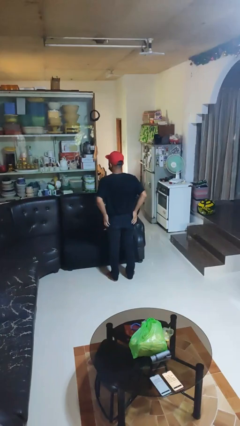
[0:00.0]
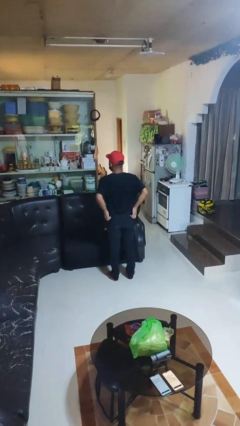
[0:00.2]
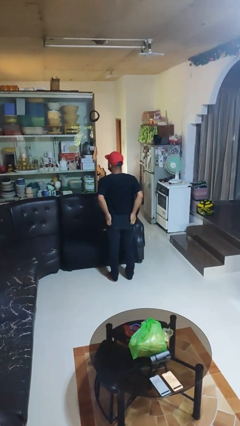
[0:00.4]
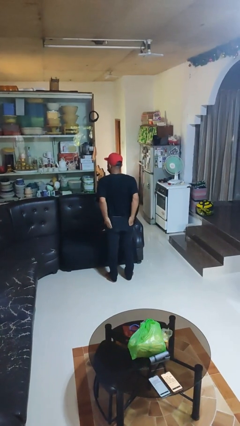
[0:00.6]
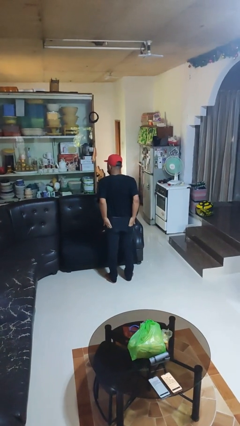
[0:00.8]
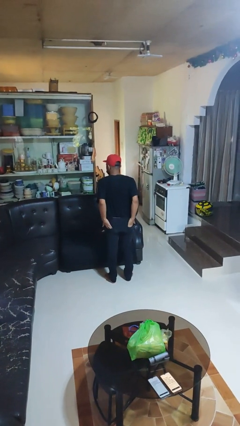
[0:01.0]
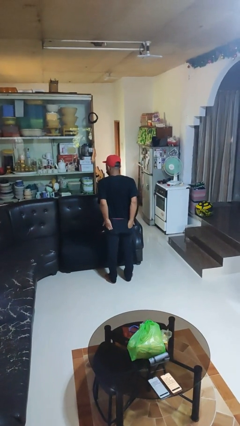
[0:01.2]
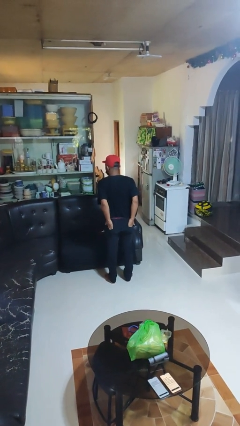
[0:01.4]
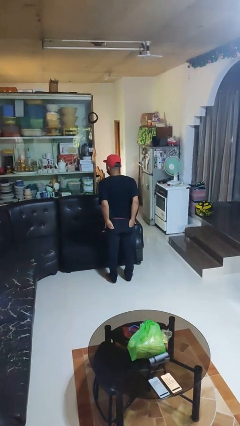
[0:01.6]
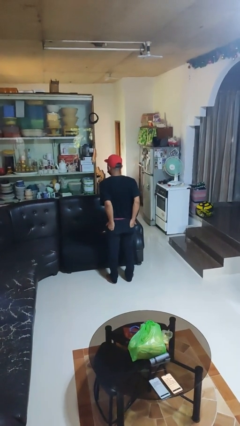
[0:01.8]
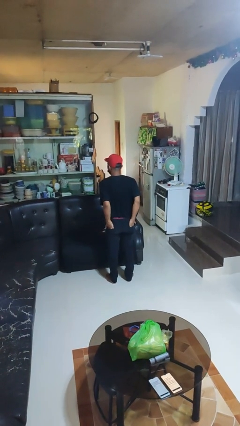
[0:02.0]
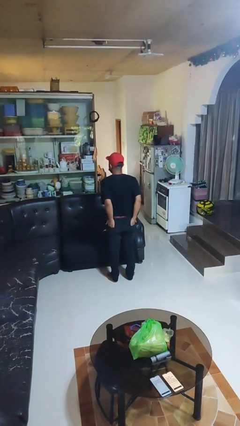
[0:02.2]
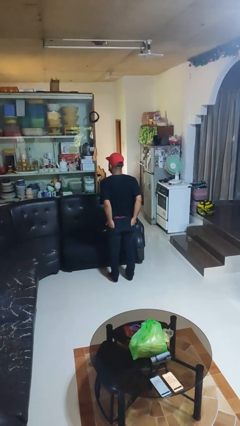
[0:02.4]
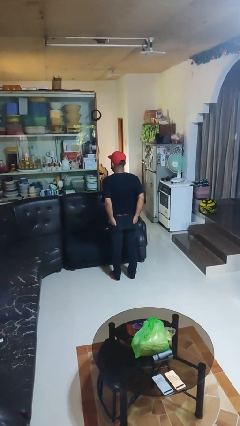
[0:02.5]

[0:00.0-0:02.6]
person takes off shirt

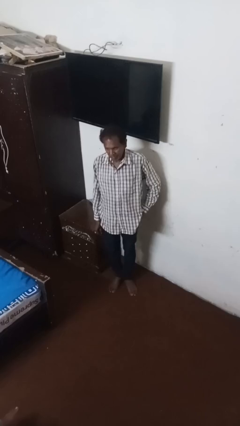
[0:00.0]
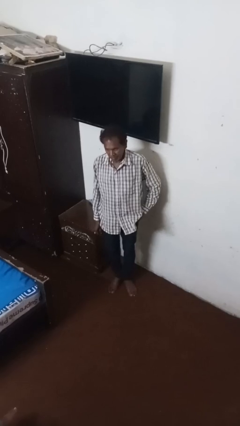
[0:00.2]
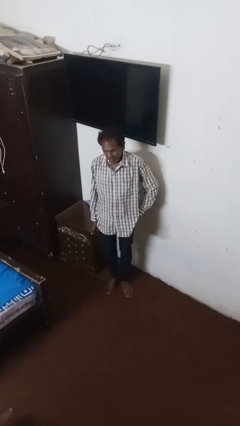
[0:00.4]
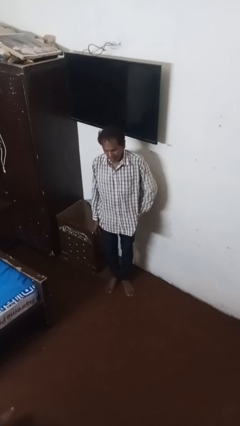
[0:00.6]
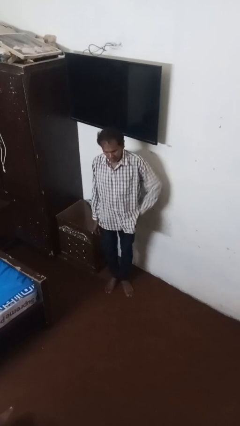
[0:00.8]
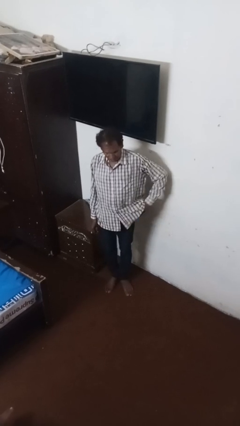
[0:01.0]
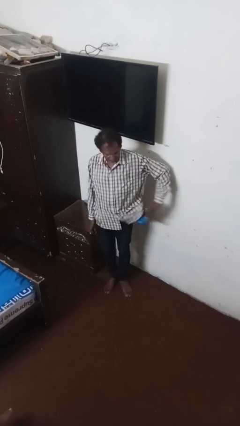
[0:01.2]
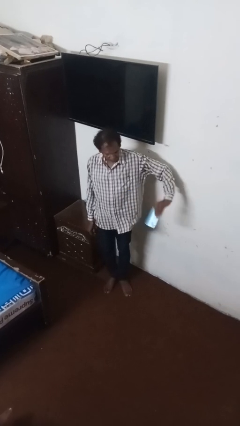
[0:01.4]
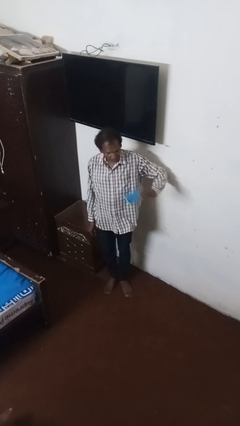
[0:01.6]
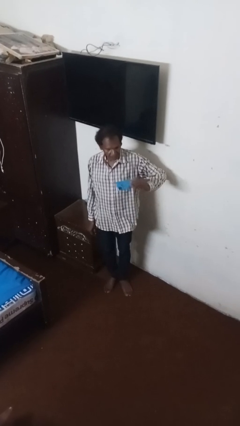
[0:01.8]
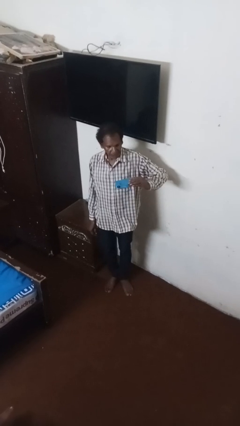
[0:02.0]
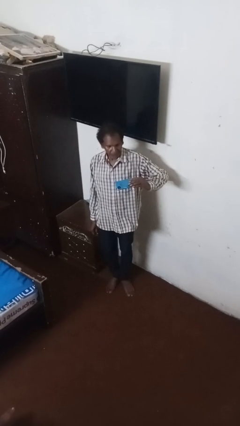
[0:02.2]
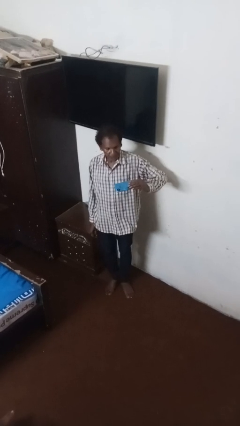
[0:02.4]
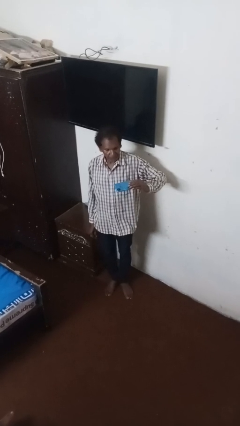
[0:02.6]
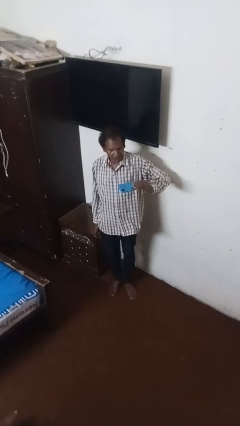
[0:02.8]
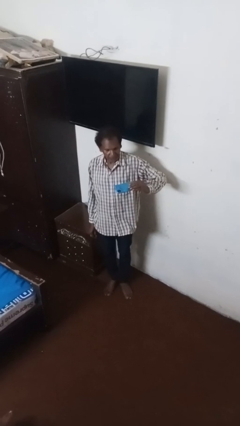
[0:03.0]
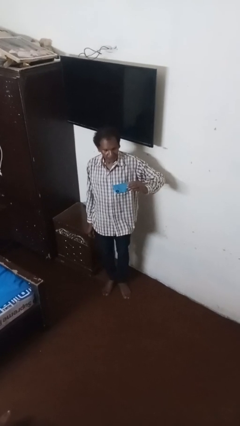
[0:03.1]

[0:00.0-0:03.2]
person takes phone from pocket

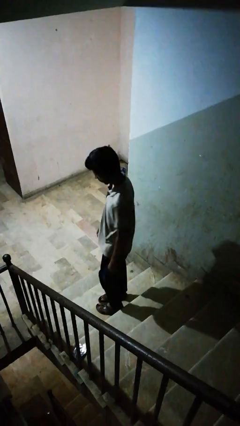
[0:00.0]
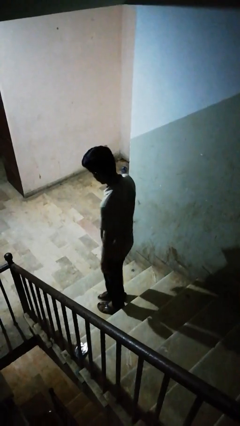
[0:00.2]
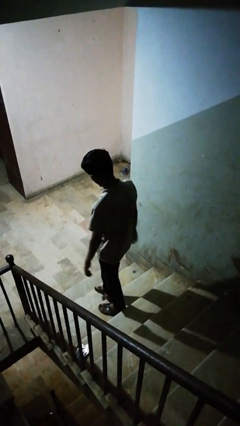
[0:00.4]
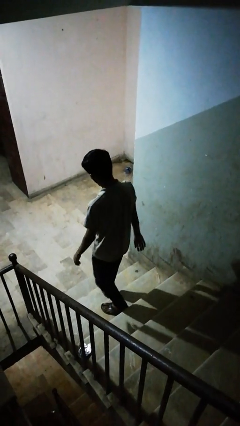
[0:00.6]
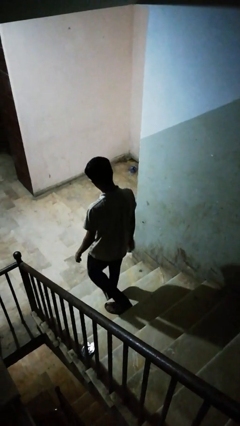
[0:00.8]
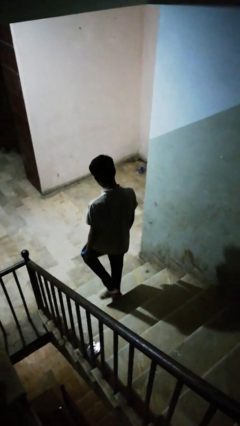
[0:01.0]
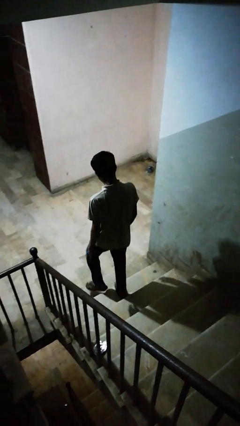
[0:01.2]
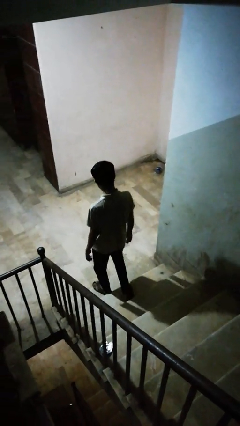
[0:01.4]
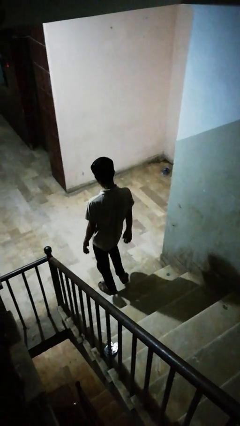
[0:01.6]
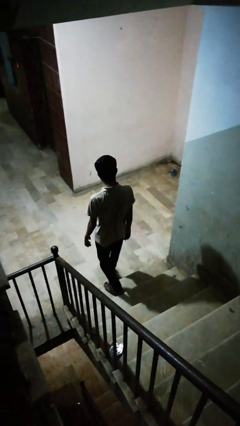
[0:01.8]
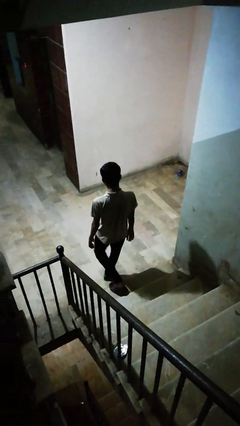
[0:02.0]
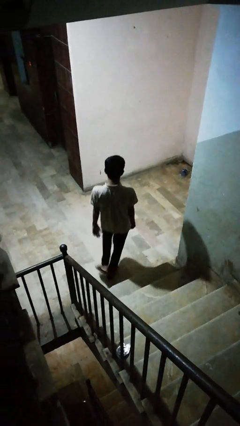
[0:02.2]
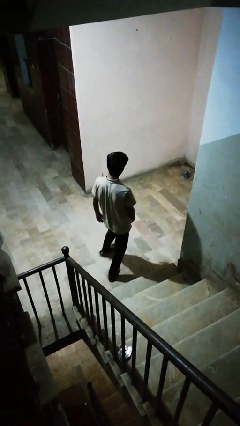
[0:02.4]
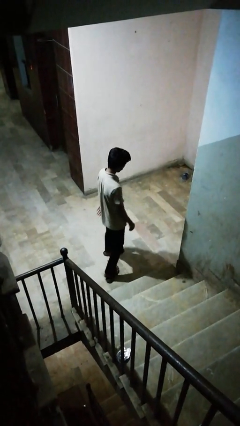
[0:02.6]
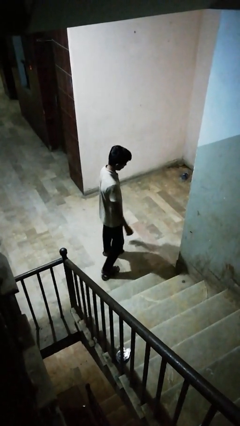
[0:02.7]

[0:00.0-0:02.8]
person climbs down stairs

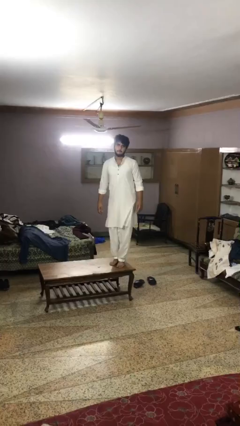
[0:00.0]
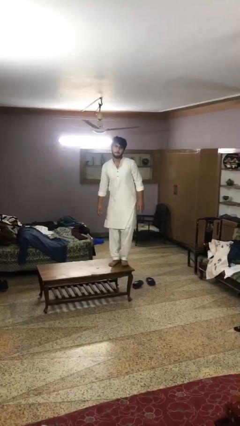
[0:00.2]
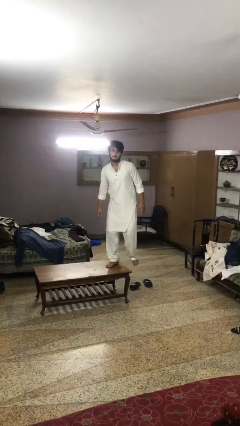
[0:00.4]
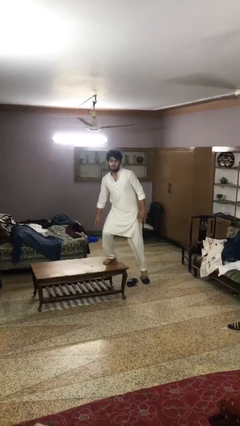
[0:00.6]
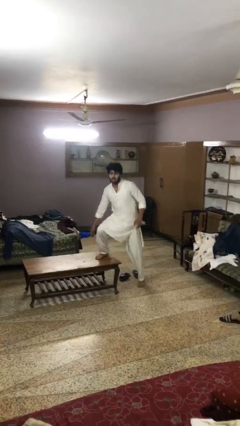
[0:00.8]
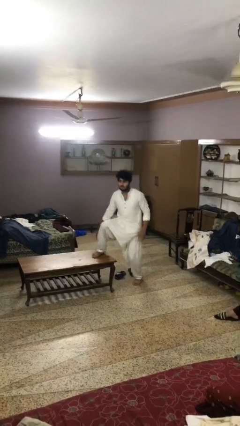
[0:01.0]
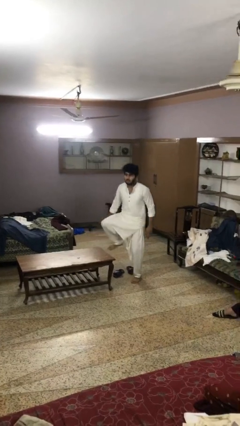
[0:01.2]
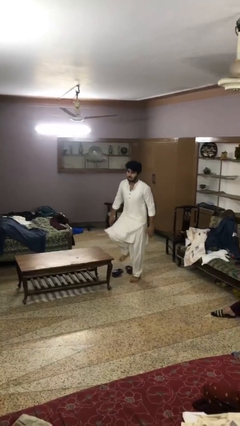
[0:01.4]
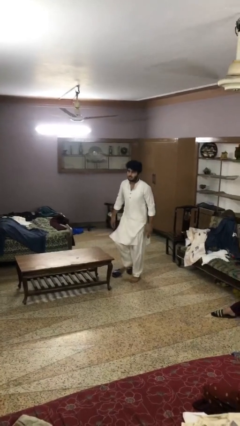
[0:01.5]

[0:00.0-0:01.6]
person climbs off table

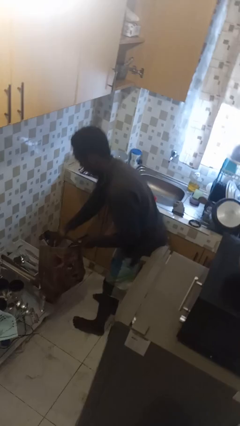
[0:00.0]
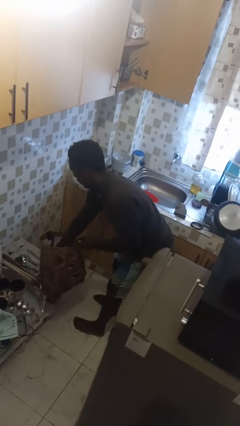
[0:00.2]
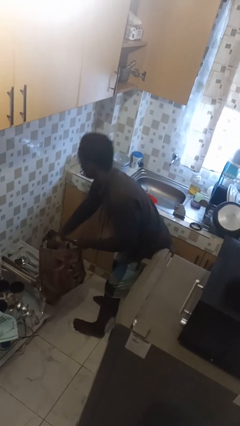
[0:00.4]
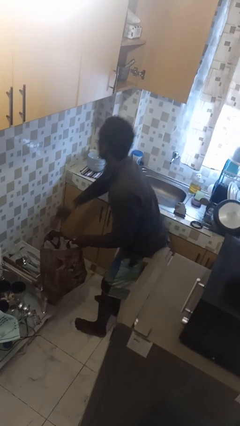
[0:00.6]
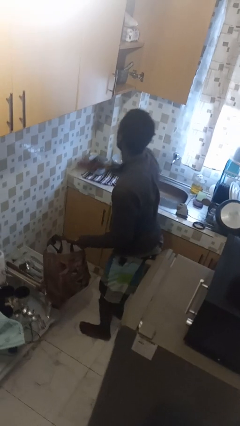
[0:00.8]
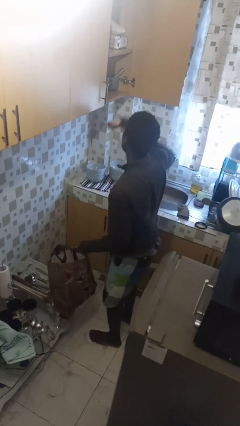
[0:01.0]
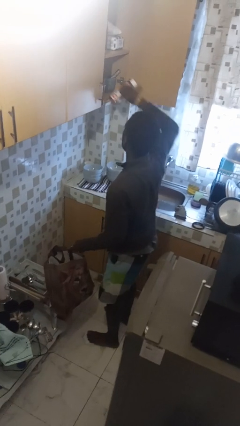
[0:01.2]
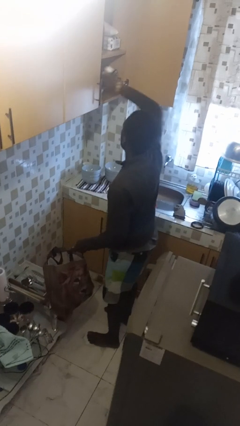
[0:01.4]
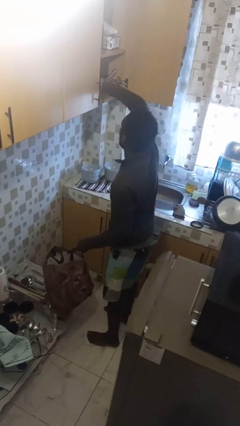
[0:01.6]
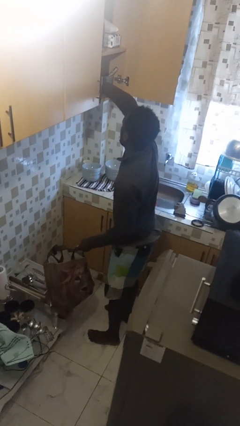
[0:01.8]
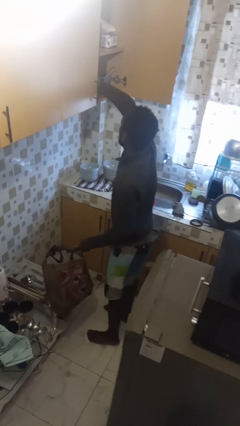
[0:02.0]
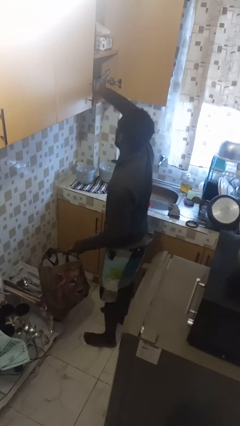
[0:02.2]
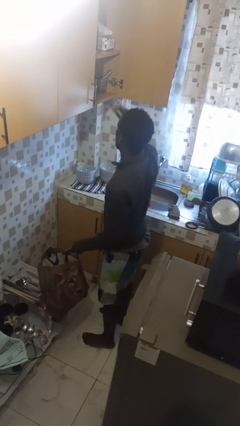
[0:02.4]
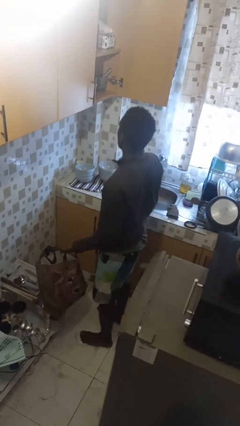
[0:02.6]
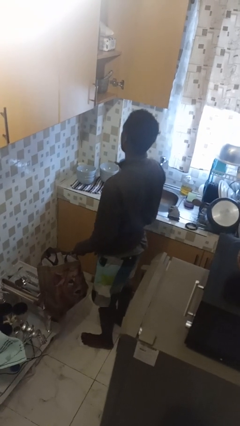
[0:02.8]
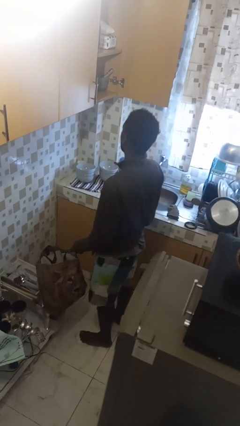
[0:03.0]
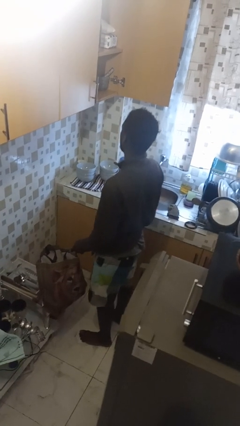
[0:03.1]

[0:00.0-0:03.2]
person loads groceries into cabinet

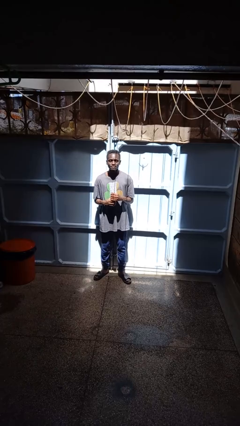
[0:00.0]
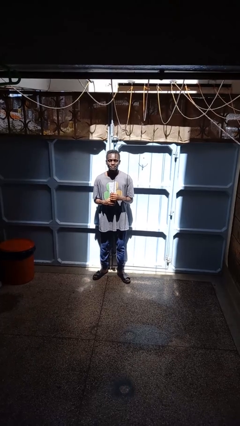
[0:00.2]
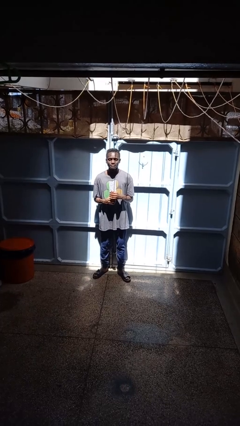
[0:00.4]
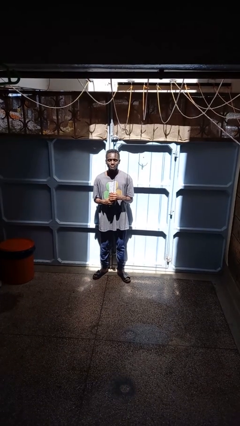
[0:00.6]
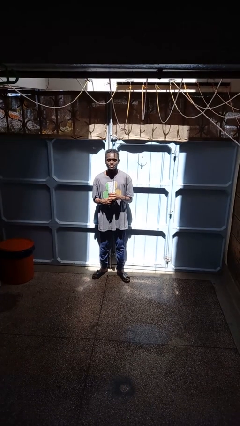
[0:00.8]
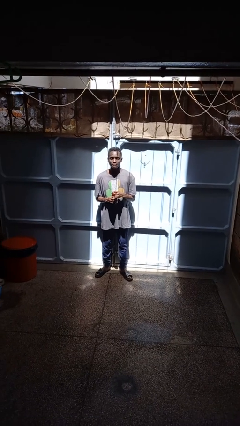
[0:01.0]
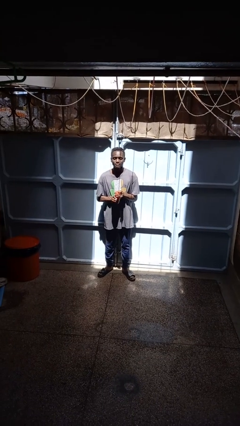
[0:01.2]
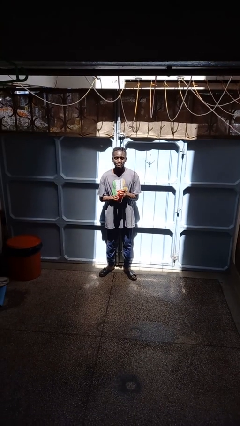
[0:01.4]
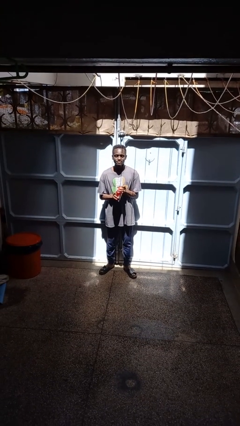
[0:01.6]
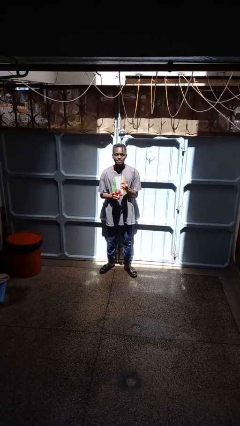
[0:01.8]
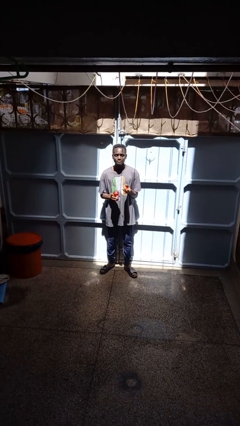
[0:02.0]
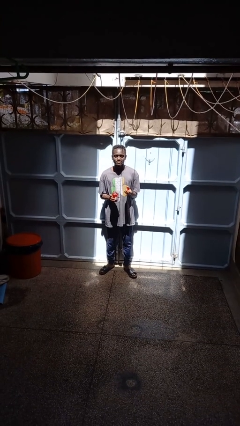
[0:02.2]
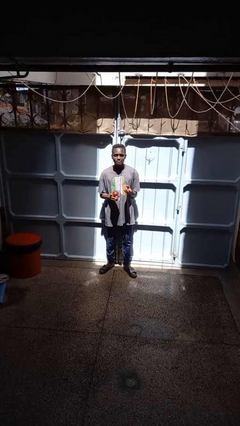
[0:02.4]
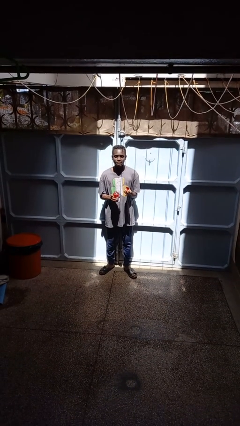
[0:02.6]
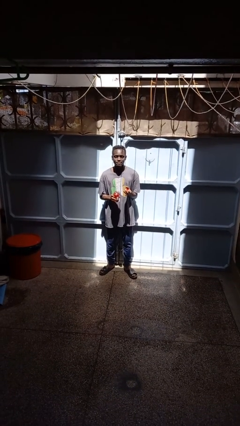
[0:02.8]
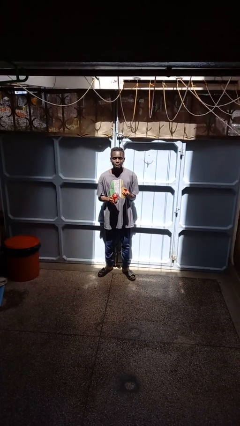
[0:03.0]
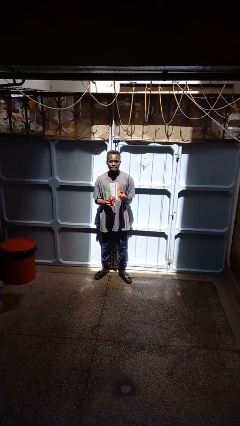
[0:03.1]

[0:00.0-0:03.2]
person opens jar

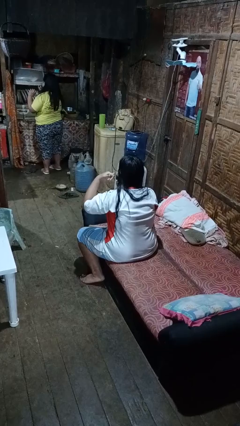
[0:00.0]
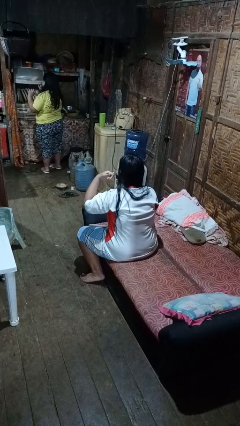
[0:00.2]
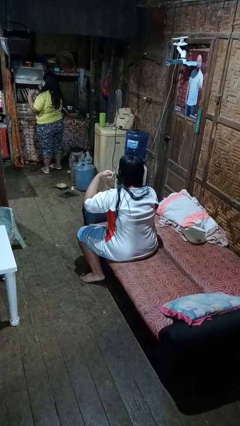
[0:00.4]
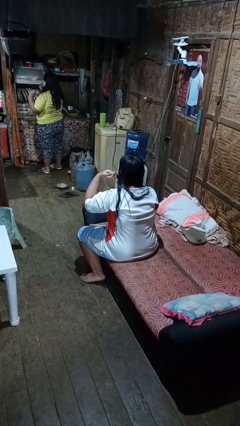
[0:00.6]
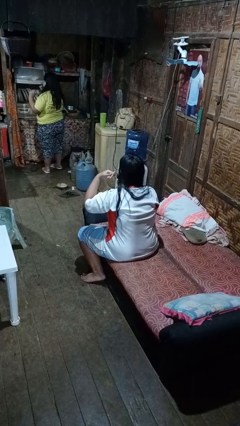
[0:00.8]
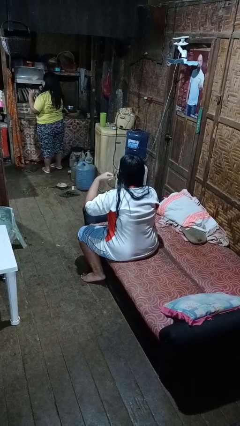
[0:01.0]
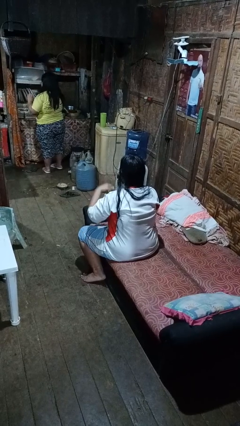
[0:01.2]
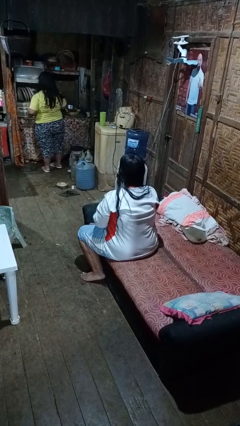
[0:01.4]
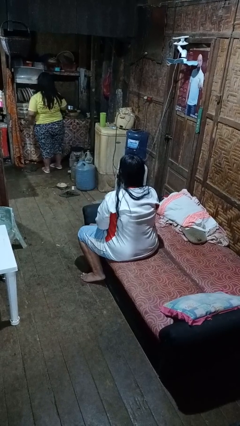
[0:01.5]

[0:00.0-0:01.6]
person gestures call me
